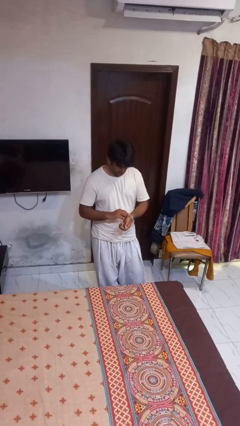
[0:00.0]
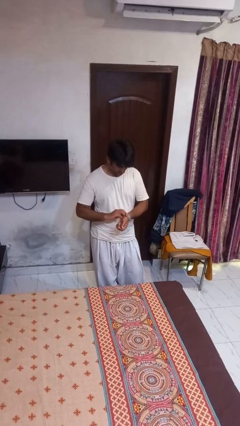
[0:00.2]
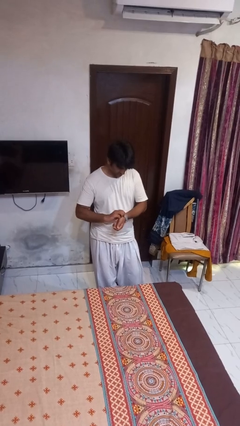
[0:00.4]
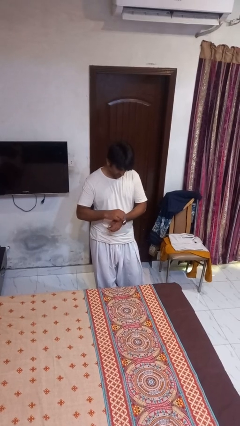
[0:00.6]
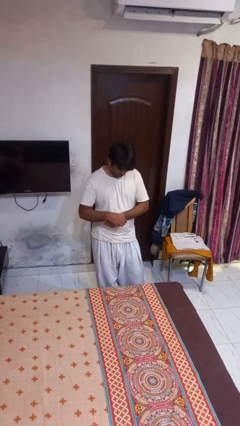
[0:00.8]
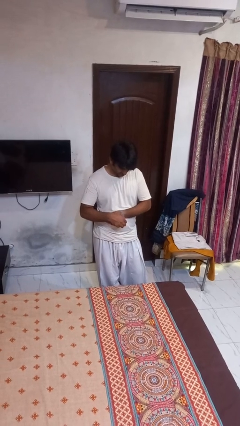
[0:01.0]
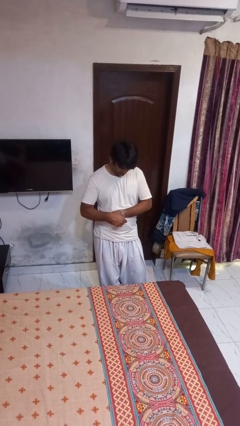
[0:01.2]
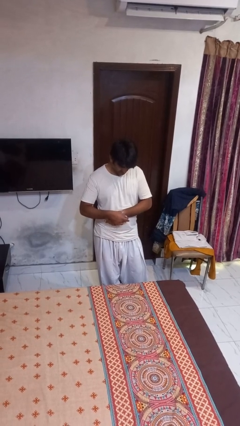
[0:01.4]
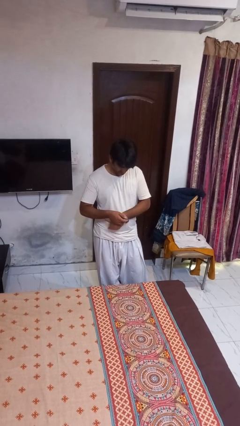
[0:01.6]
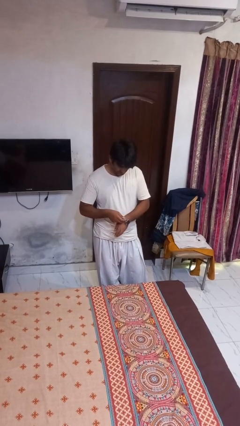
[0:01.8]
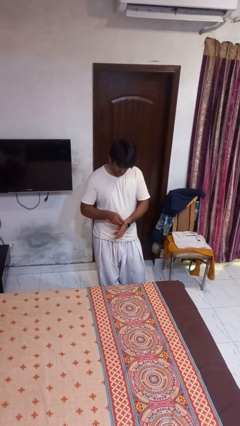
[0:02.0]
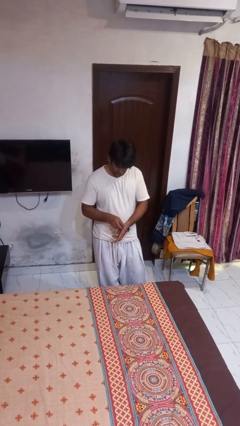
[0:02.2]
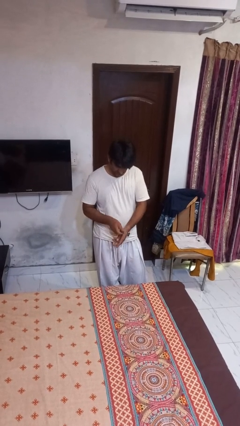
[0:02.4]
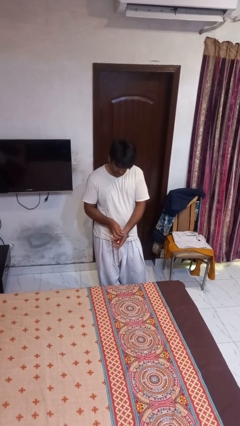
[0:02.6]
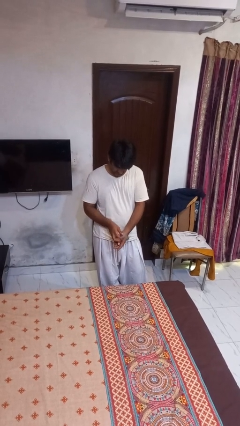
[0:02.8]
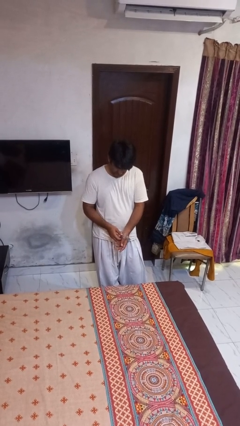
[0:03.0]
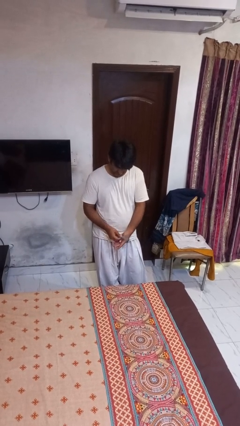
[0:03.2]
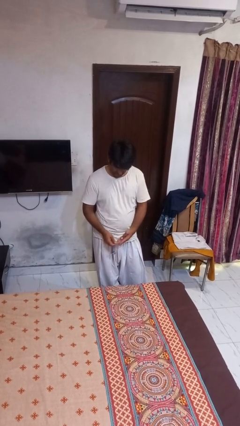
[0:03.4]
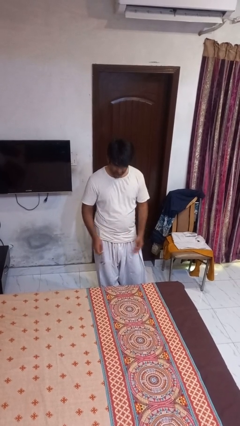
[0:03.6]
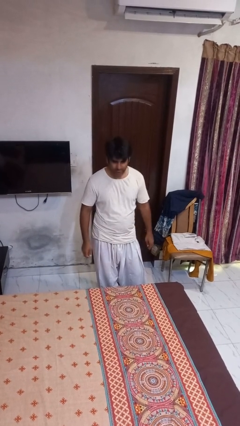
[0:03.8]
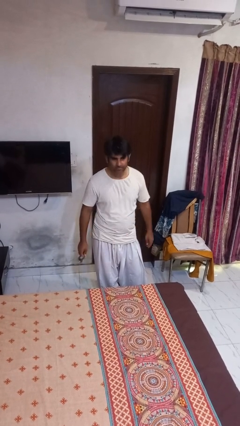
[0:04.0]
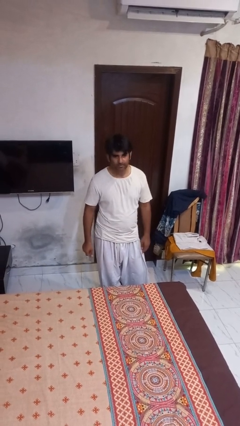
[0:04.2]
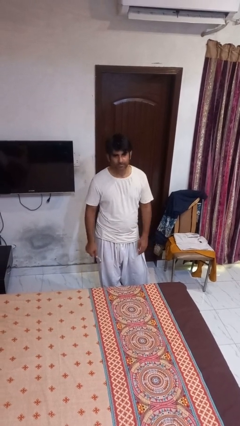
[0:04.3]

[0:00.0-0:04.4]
person takes off wristwatch

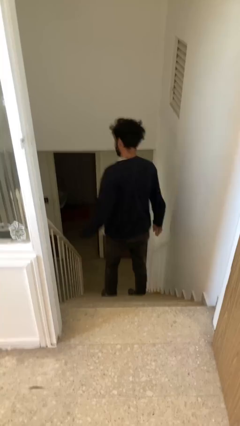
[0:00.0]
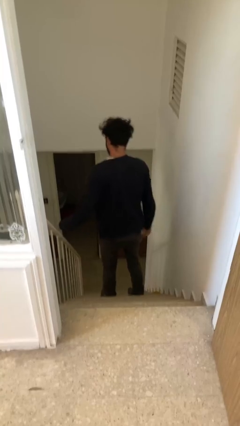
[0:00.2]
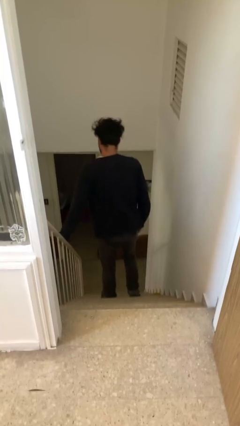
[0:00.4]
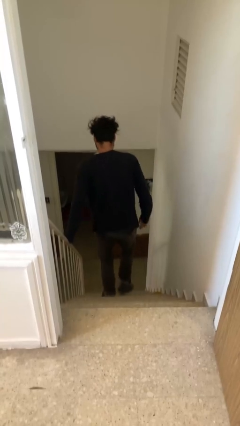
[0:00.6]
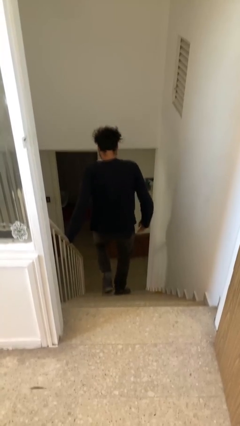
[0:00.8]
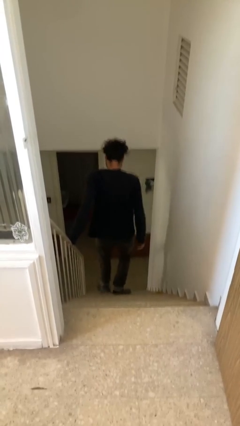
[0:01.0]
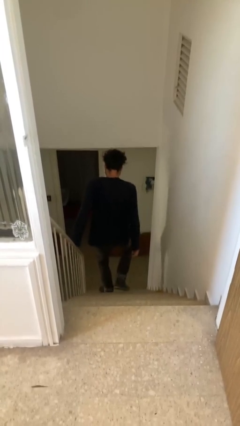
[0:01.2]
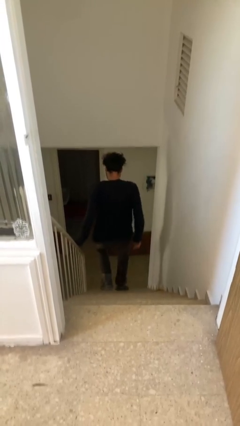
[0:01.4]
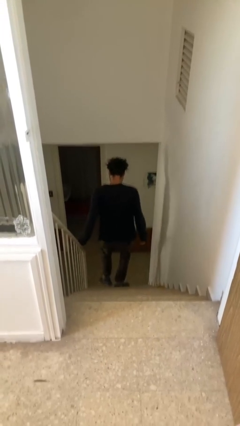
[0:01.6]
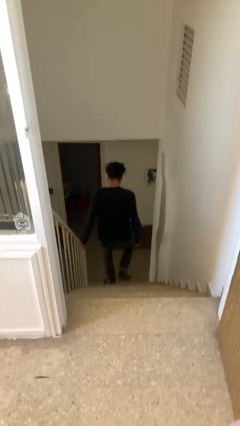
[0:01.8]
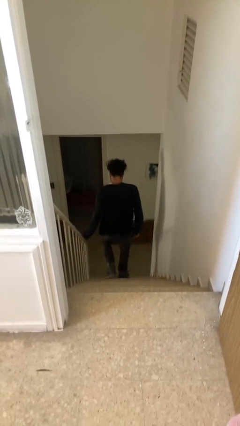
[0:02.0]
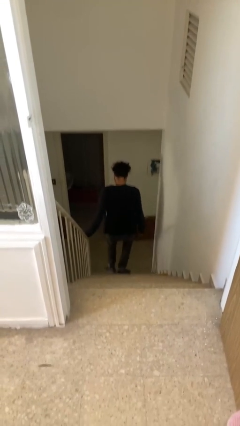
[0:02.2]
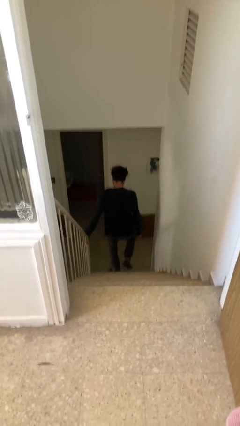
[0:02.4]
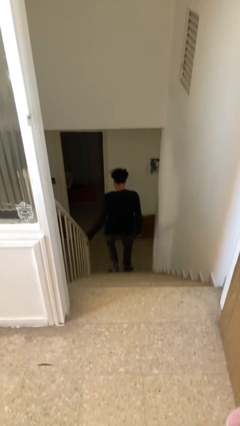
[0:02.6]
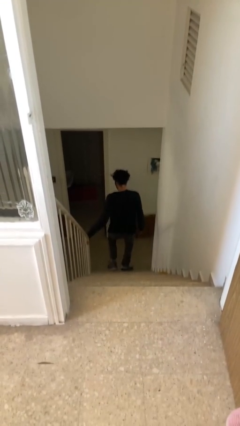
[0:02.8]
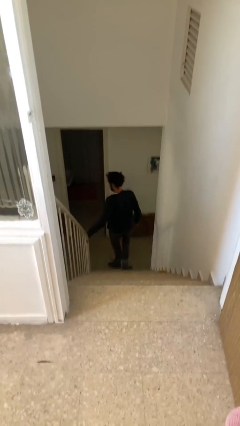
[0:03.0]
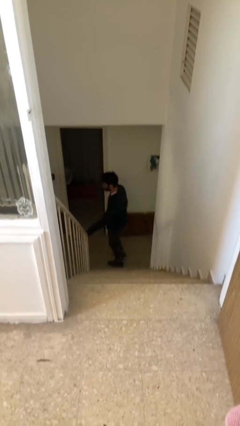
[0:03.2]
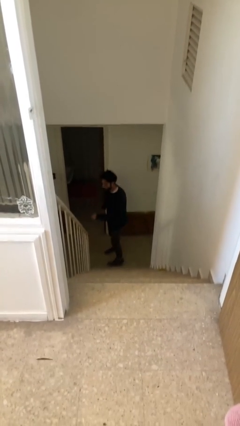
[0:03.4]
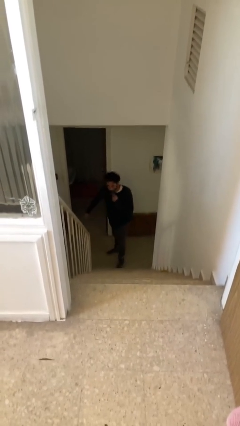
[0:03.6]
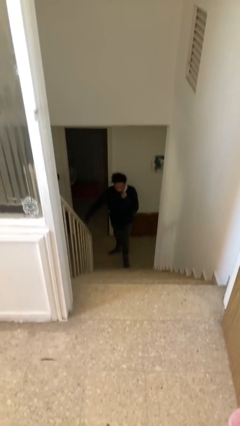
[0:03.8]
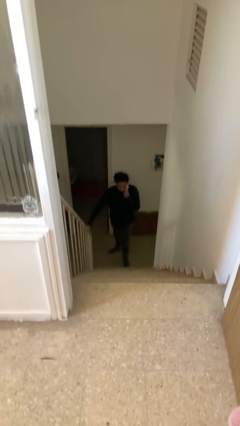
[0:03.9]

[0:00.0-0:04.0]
person climbs down stairs

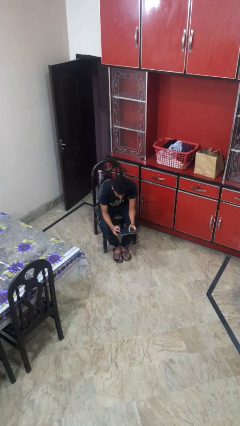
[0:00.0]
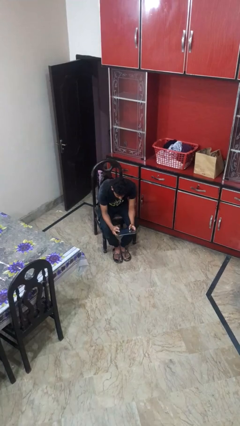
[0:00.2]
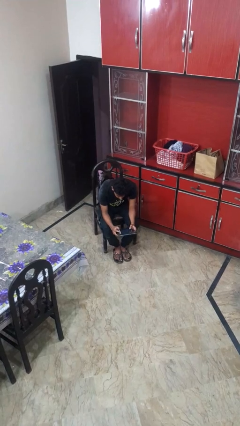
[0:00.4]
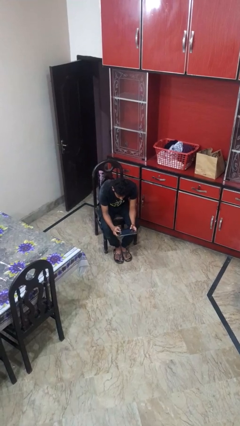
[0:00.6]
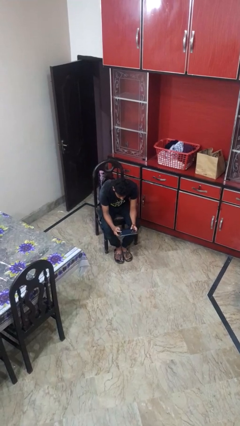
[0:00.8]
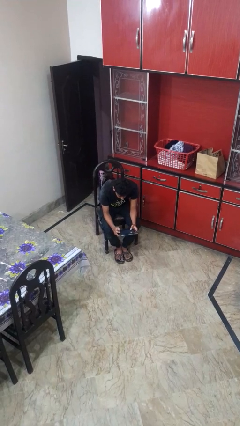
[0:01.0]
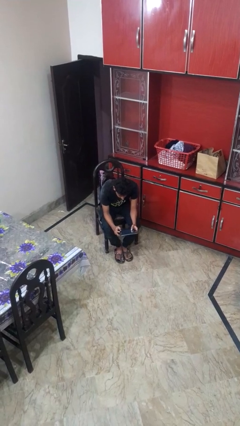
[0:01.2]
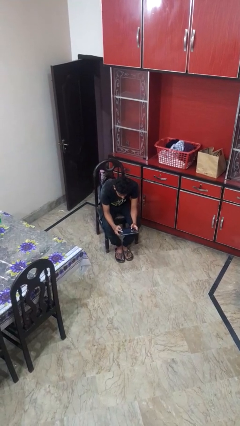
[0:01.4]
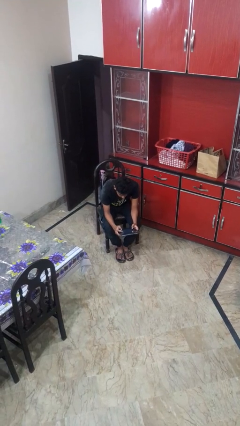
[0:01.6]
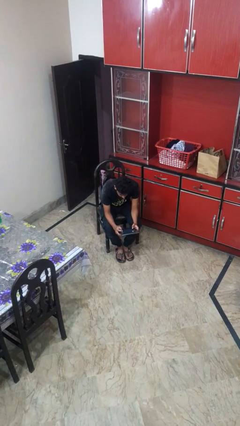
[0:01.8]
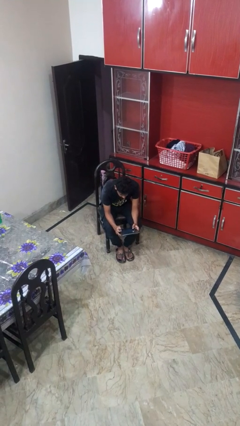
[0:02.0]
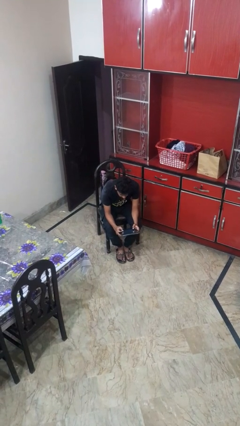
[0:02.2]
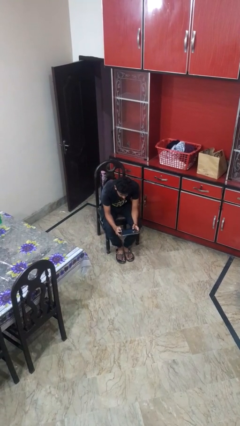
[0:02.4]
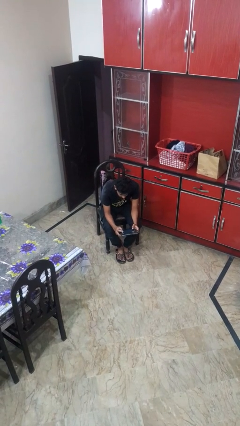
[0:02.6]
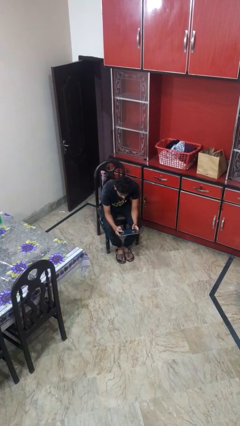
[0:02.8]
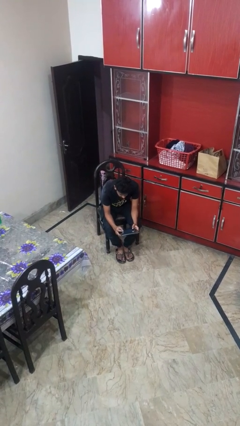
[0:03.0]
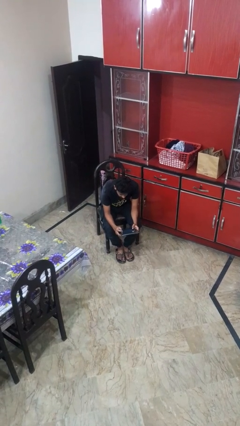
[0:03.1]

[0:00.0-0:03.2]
person interacts with tablet

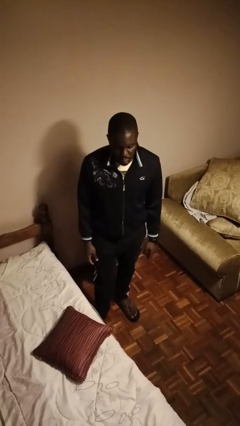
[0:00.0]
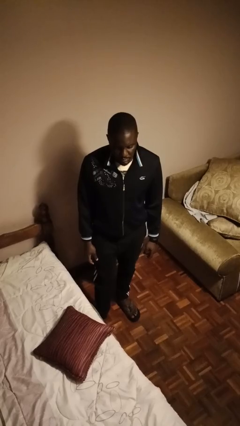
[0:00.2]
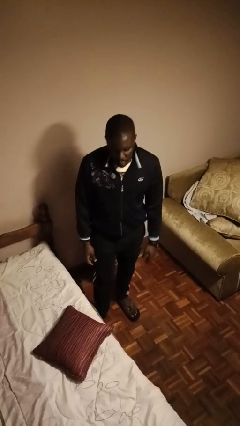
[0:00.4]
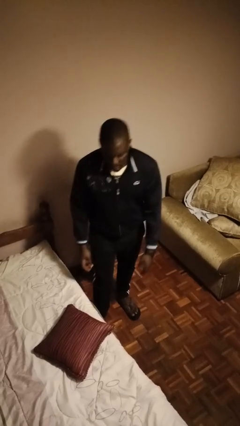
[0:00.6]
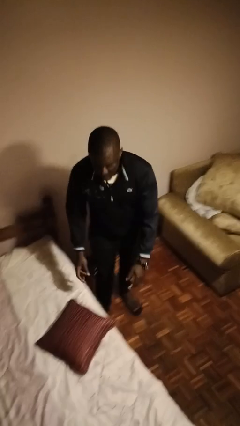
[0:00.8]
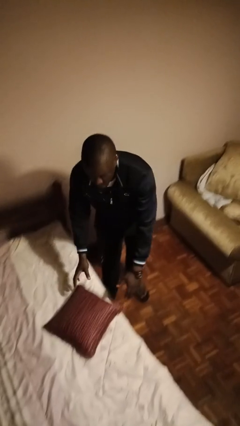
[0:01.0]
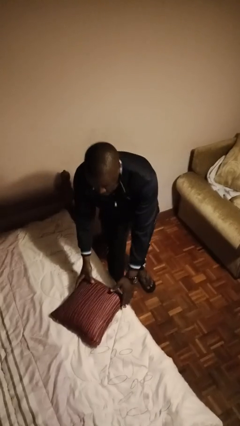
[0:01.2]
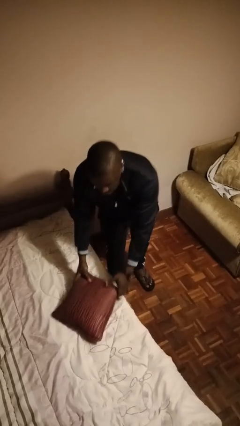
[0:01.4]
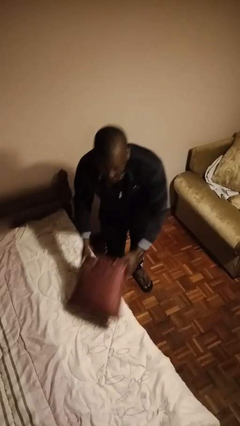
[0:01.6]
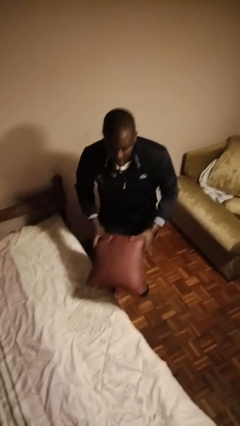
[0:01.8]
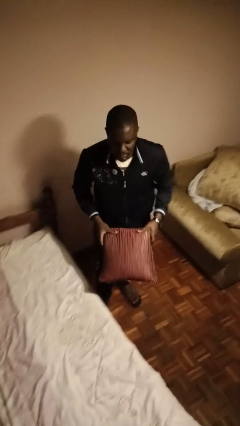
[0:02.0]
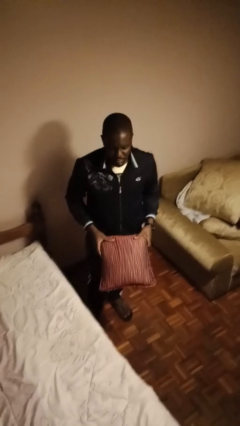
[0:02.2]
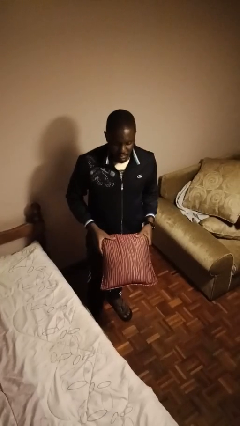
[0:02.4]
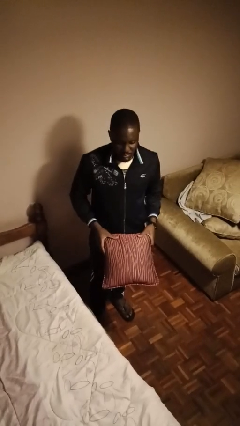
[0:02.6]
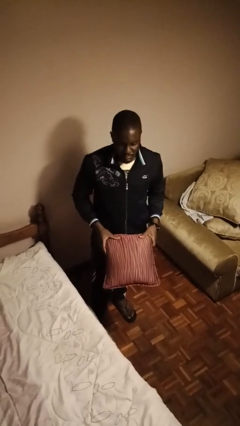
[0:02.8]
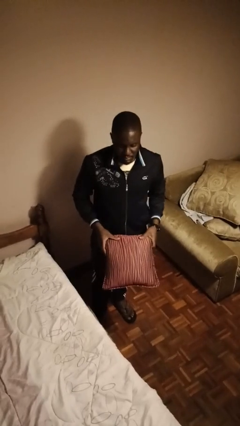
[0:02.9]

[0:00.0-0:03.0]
person picks up object from bed

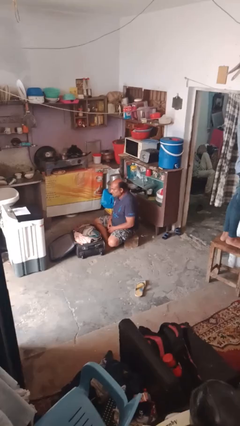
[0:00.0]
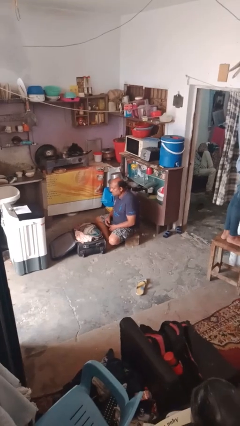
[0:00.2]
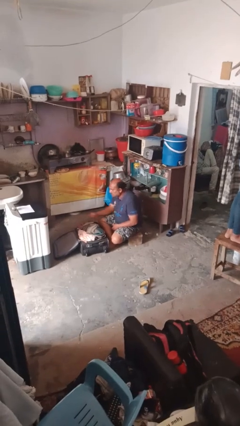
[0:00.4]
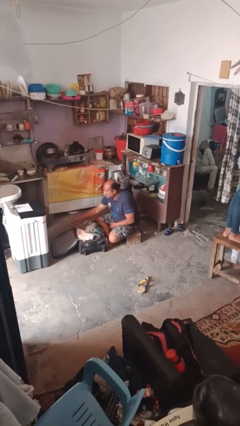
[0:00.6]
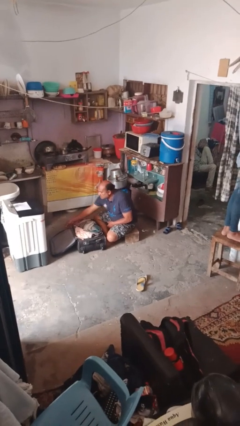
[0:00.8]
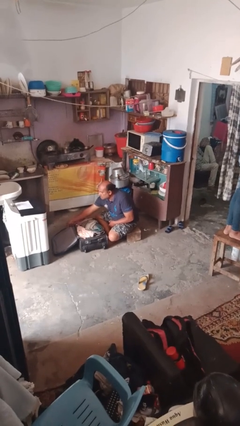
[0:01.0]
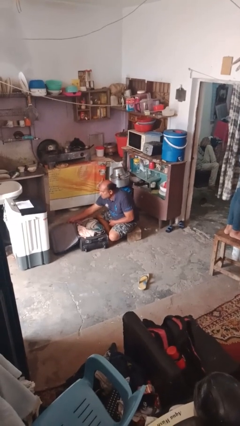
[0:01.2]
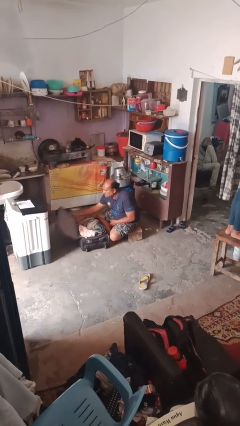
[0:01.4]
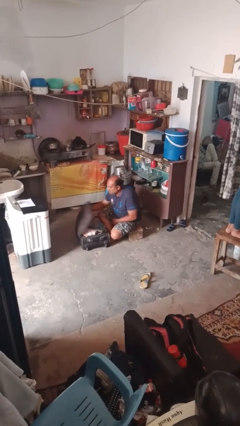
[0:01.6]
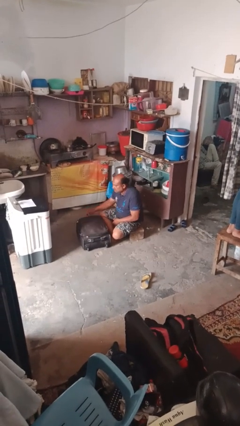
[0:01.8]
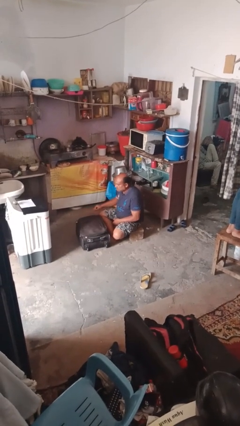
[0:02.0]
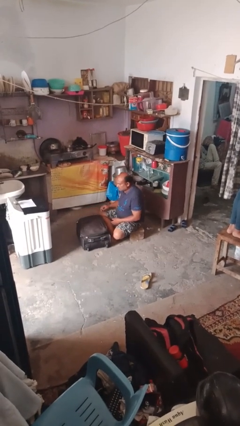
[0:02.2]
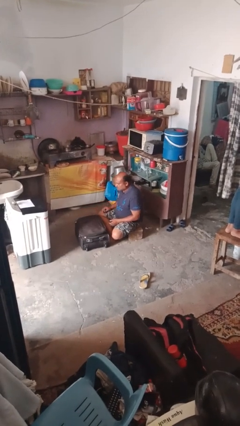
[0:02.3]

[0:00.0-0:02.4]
person closes suitcase

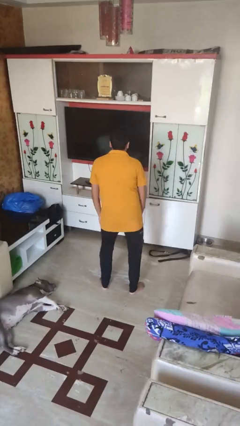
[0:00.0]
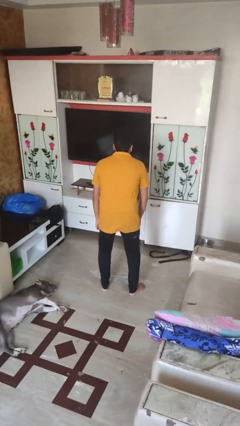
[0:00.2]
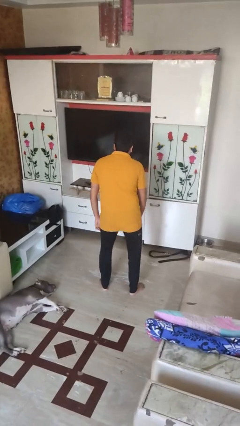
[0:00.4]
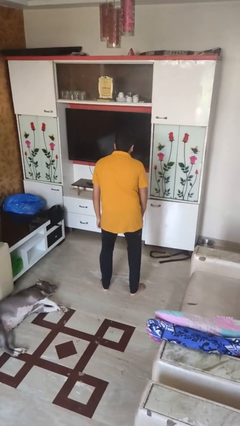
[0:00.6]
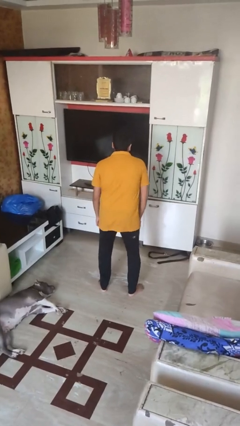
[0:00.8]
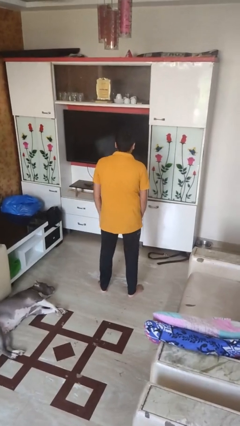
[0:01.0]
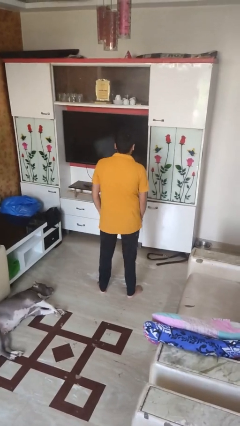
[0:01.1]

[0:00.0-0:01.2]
person wiggles hips
